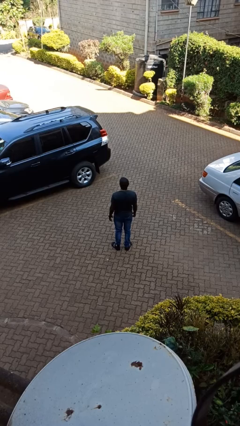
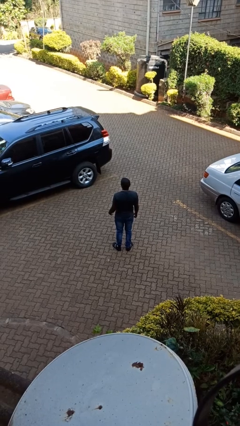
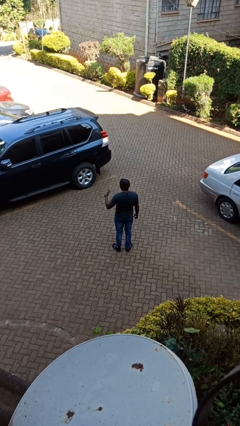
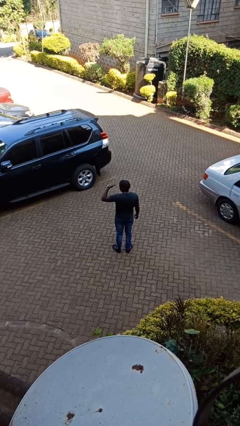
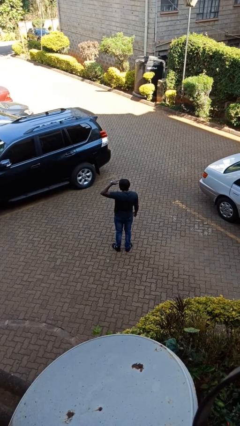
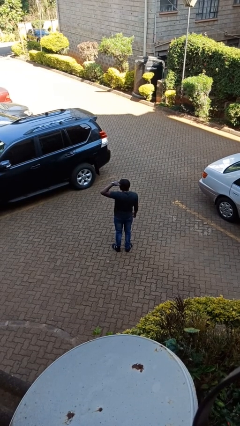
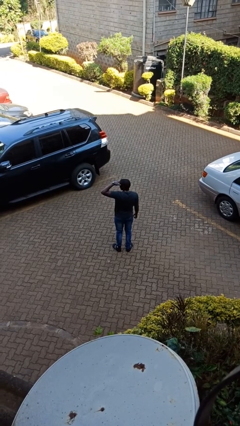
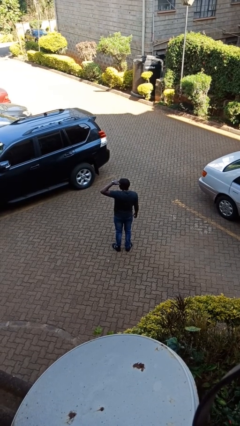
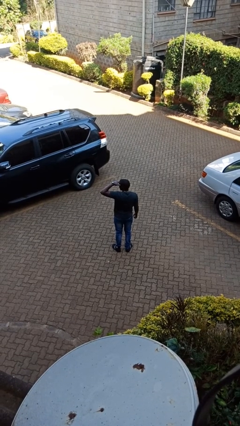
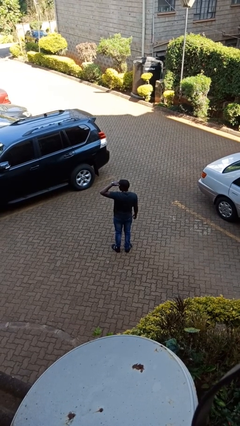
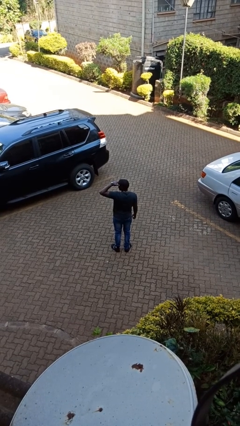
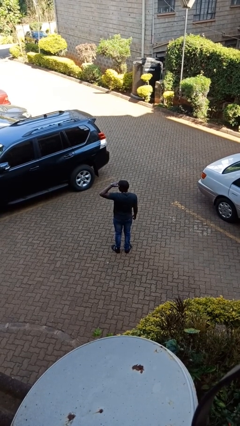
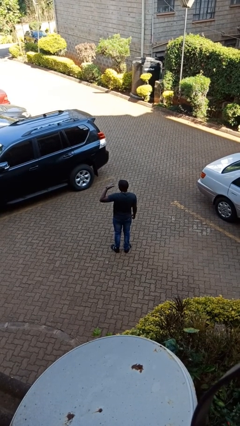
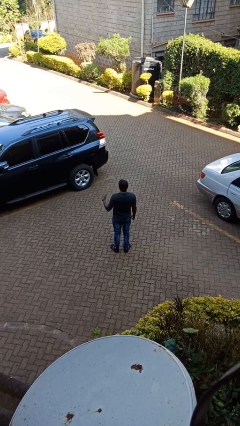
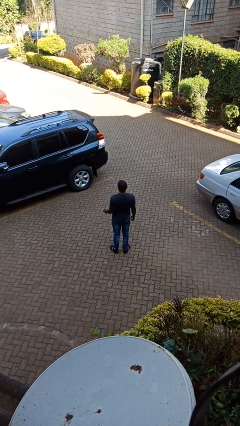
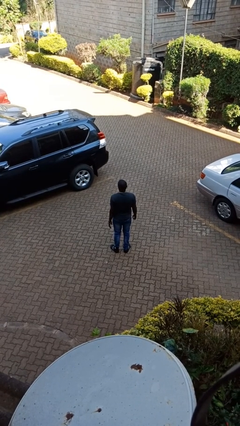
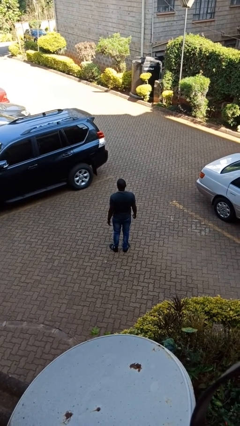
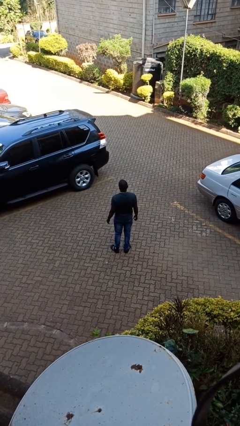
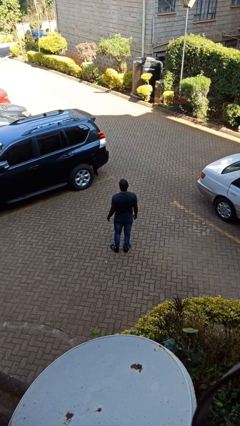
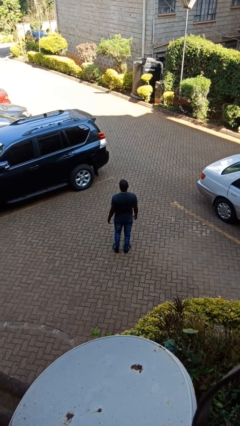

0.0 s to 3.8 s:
person shades eyes

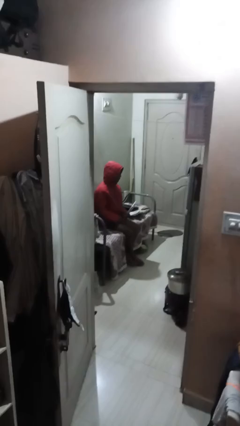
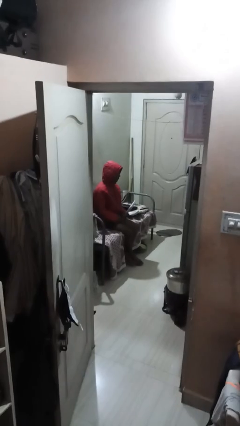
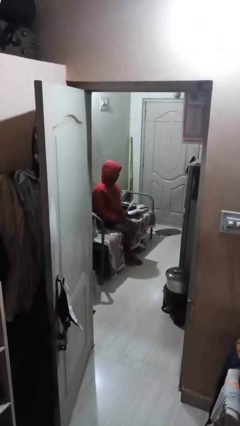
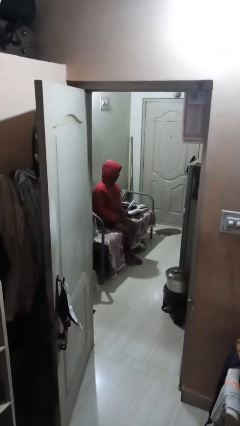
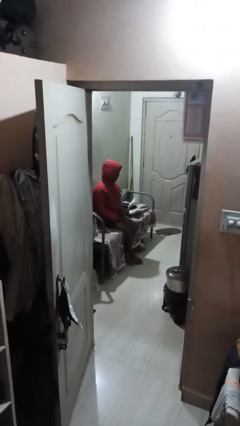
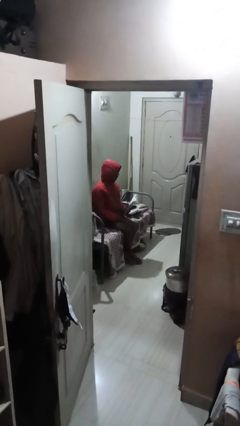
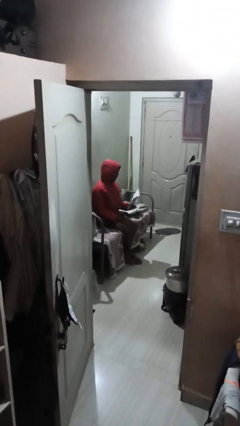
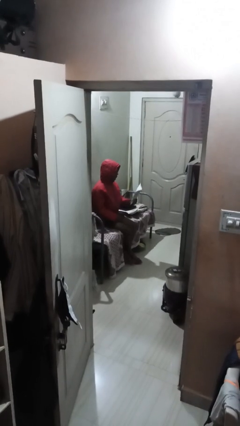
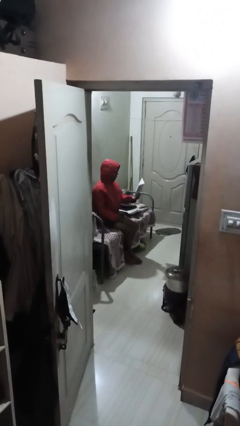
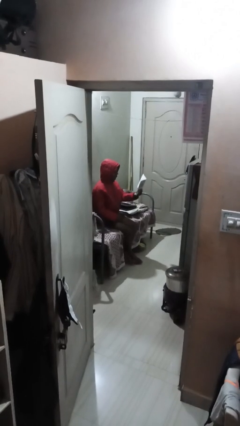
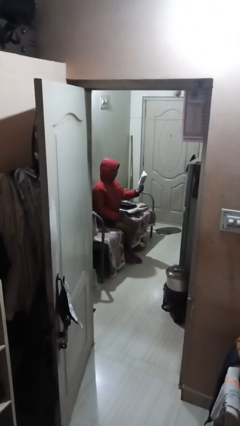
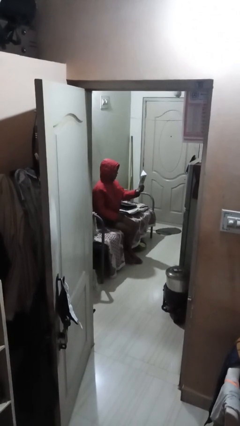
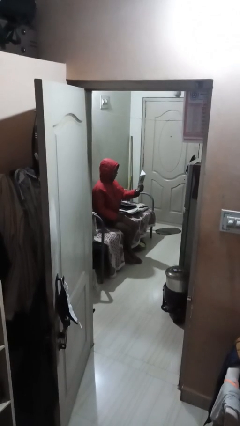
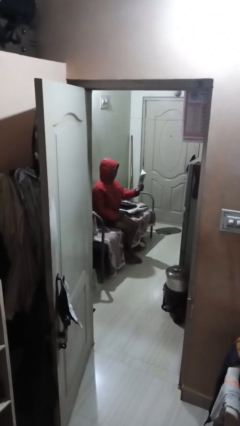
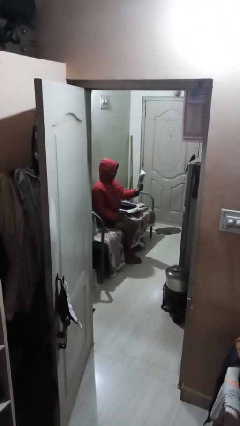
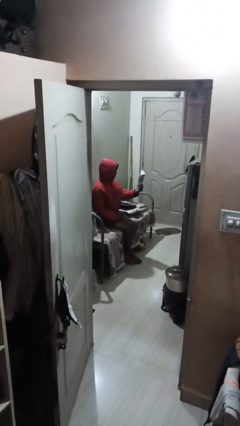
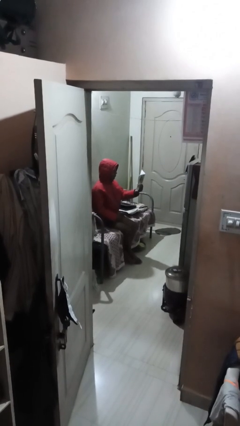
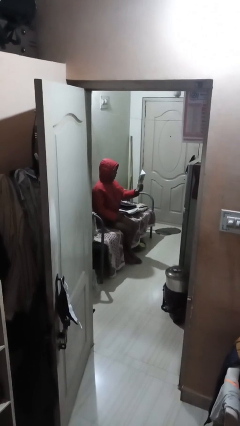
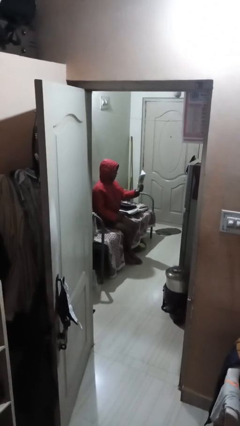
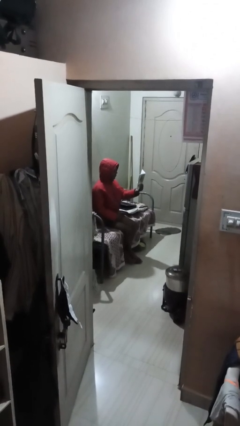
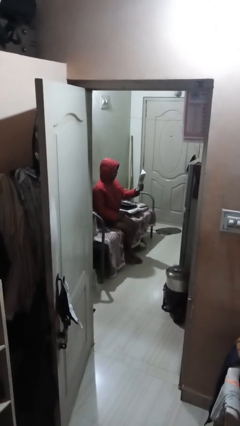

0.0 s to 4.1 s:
person reads document

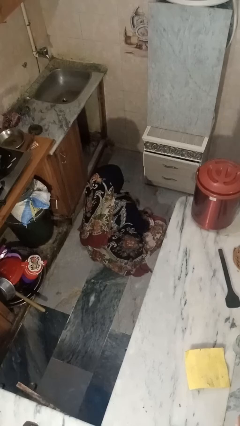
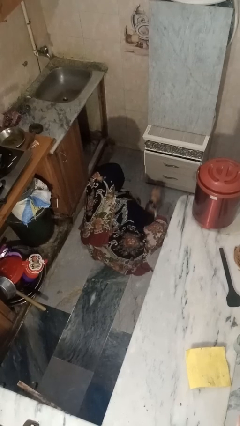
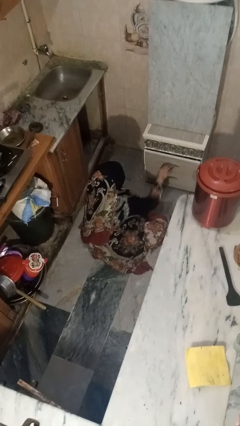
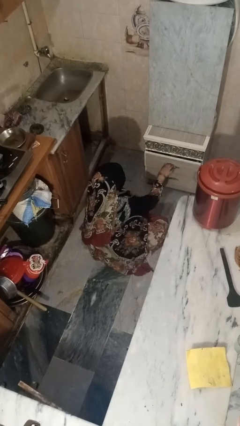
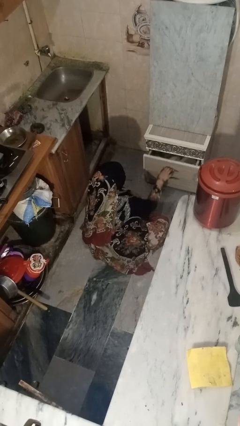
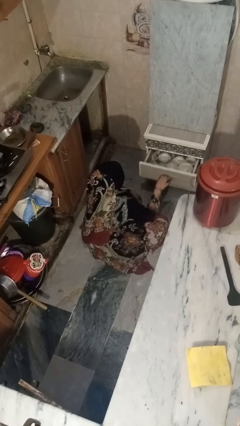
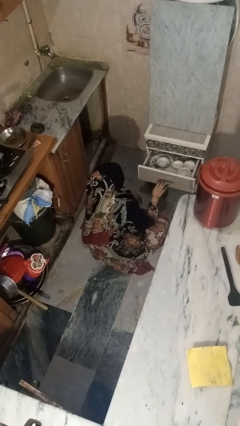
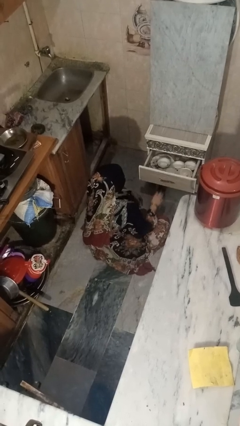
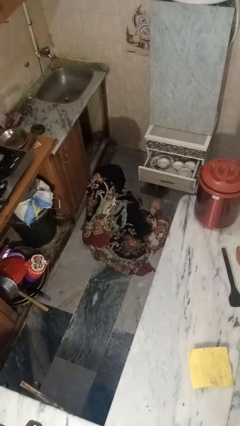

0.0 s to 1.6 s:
person opens kitchen drawer

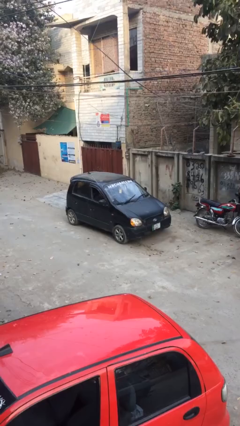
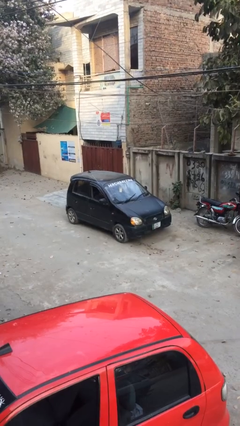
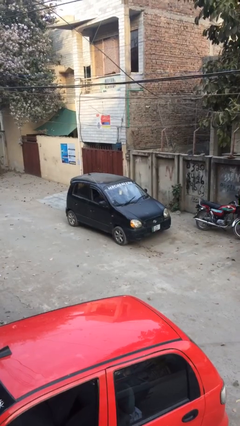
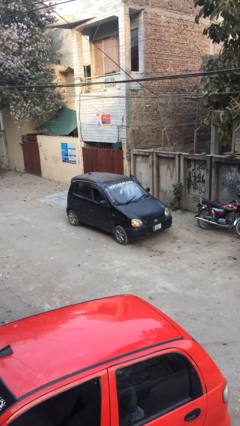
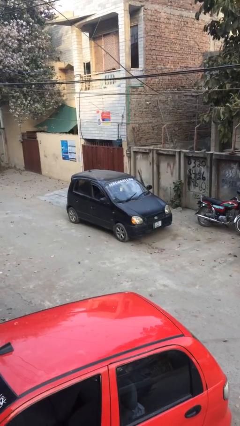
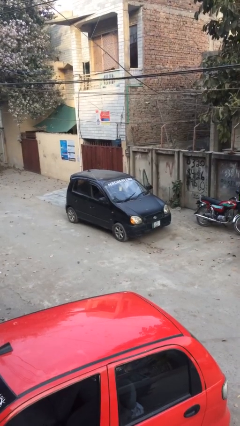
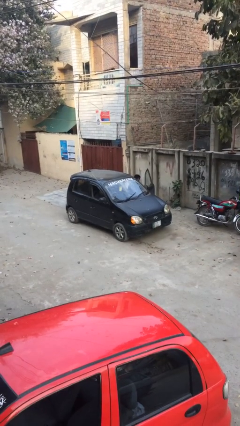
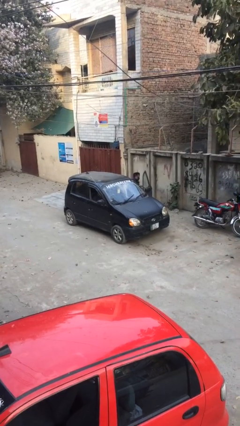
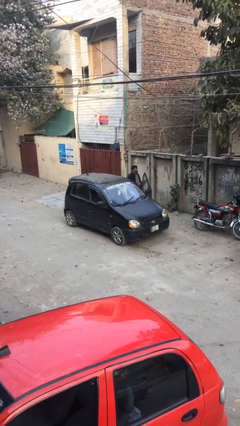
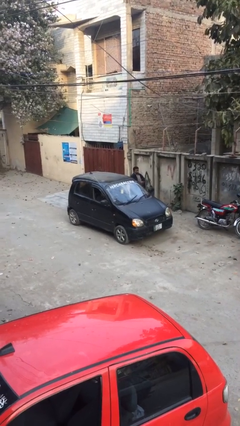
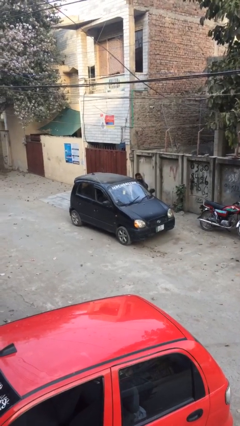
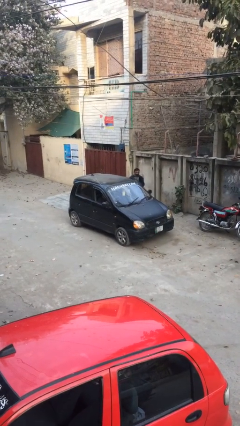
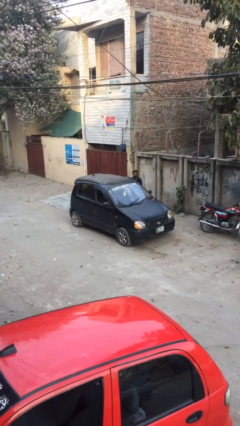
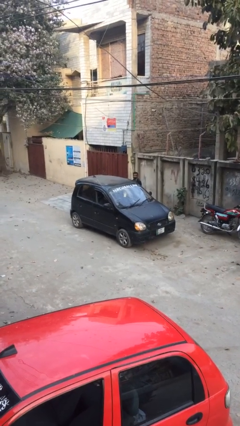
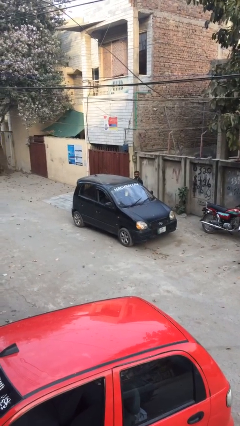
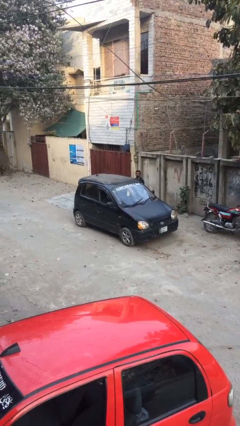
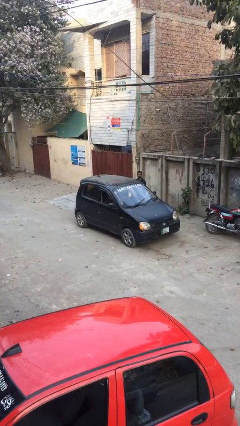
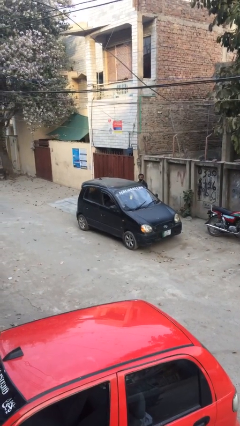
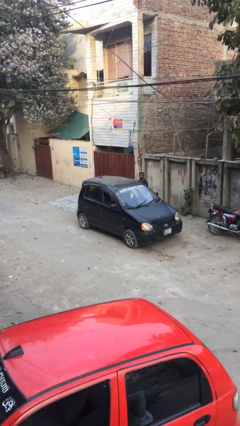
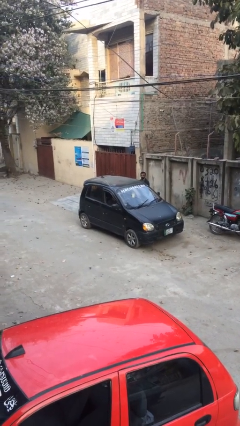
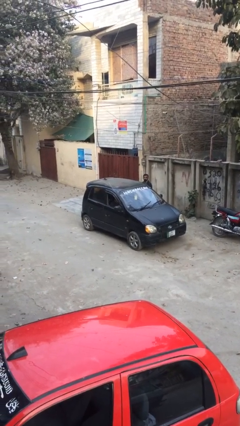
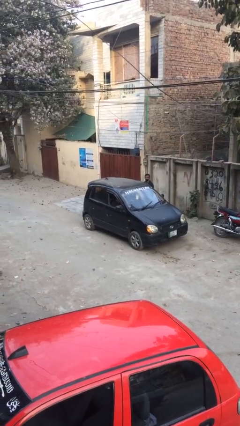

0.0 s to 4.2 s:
car drops off person

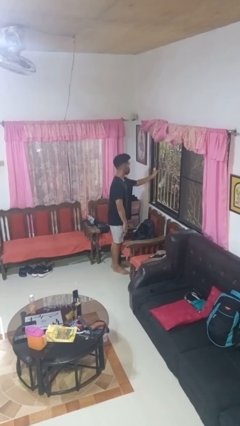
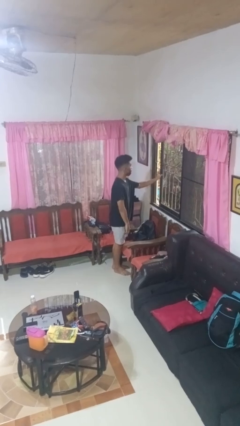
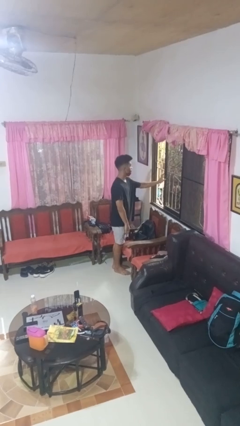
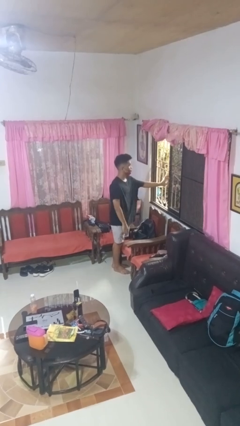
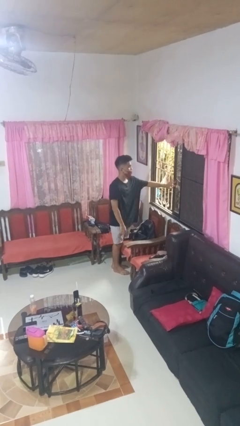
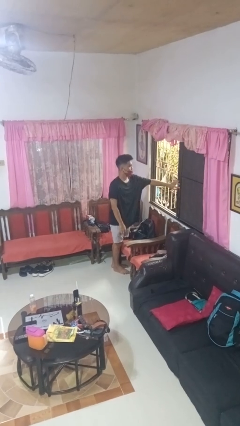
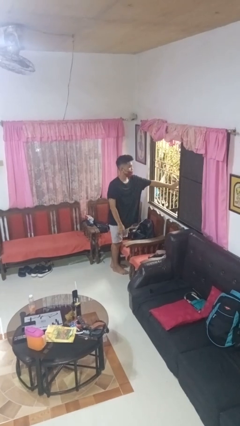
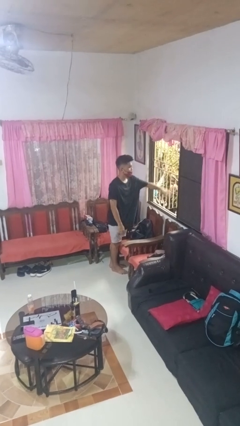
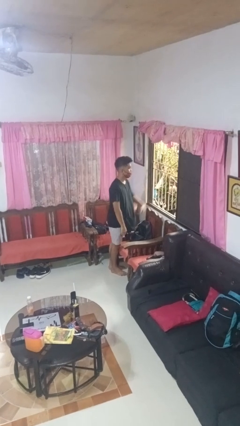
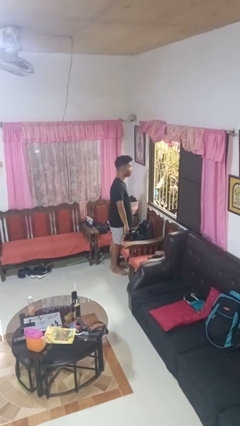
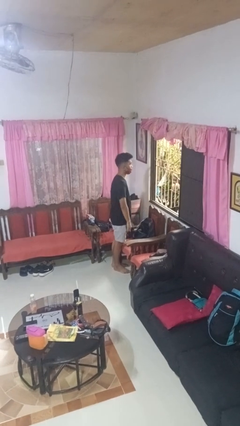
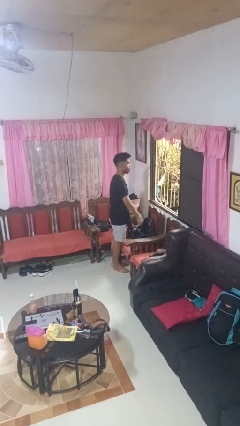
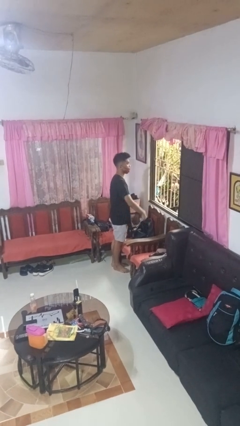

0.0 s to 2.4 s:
person opens home window

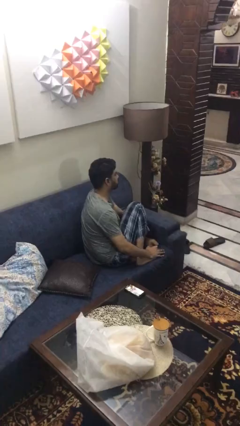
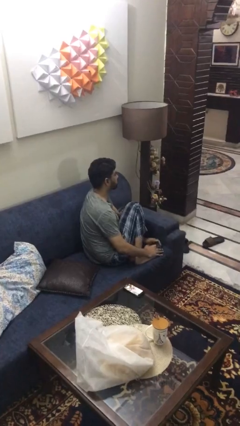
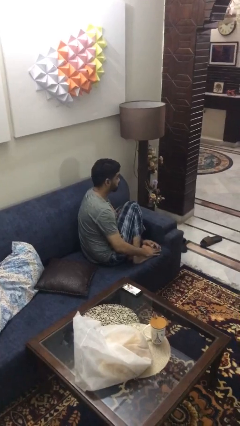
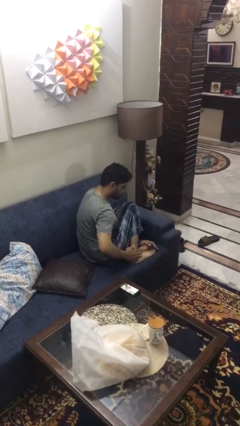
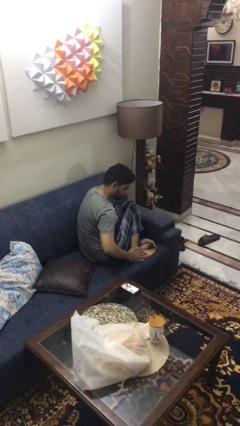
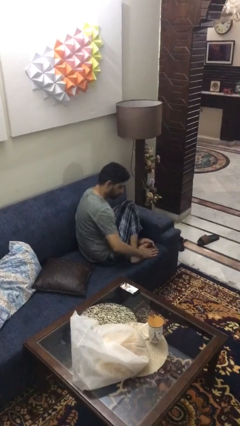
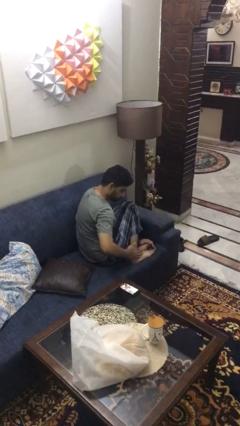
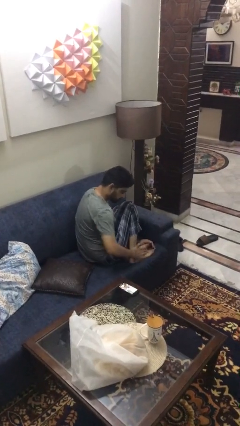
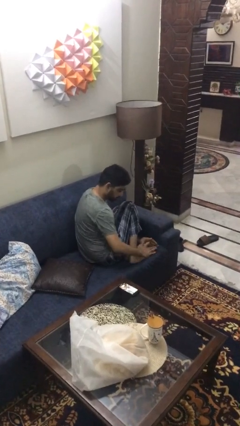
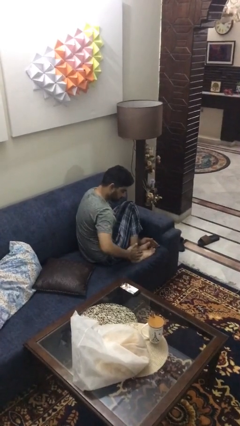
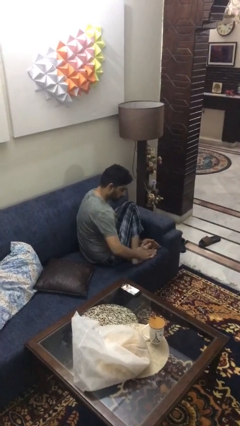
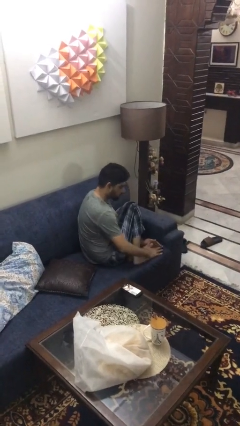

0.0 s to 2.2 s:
person rubs foot
